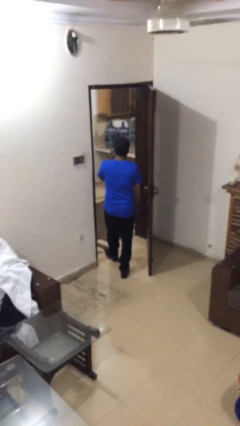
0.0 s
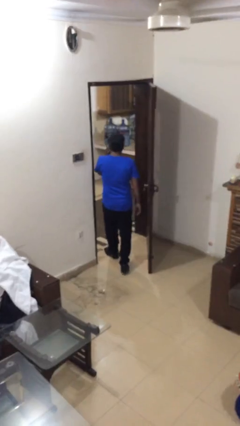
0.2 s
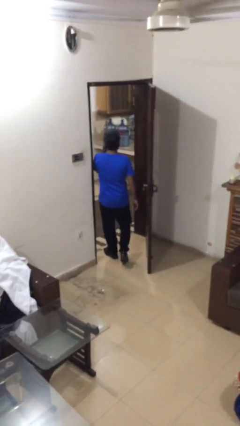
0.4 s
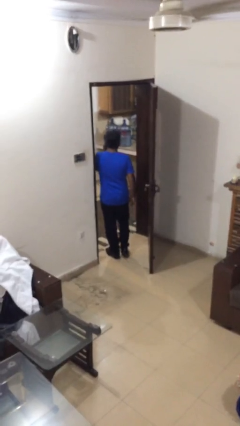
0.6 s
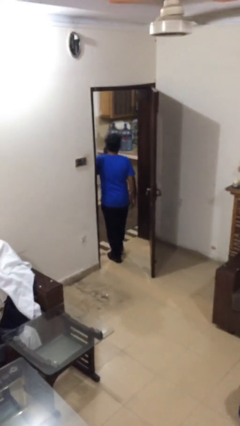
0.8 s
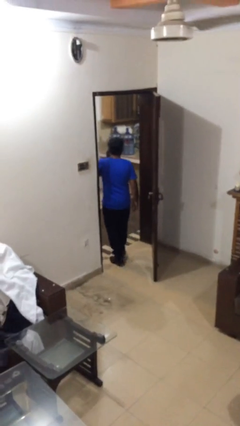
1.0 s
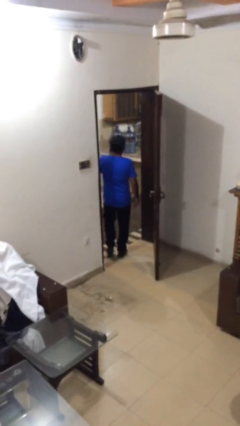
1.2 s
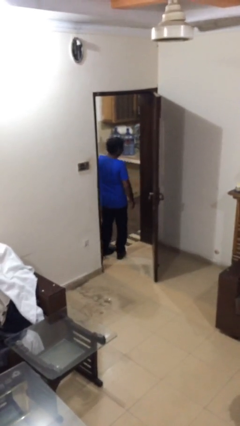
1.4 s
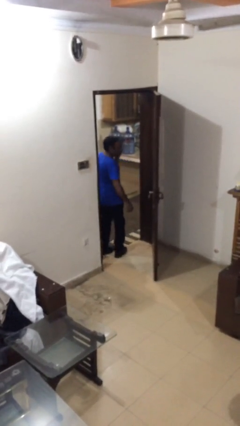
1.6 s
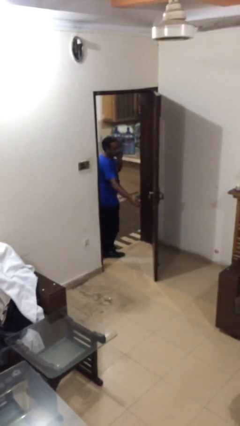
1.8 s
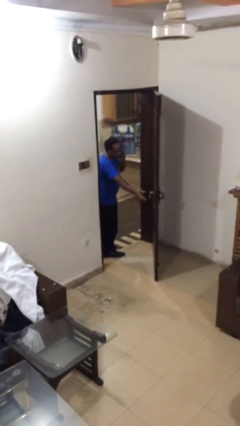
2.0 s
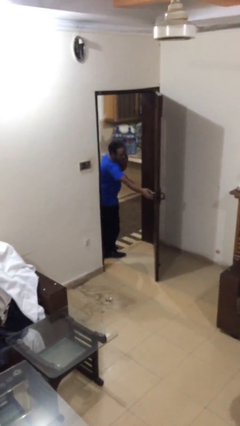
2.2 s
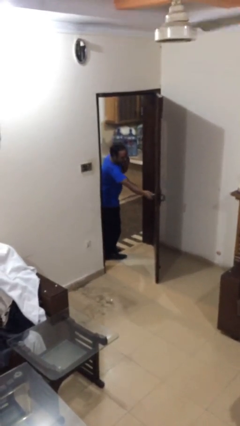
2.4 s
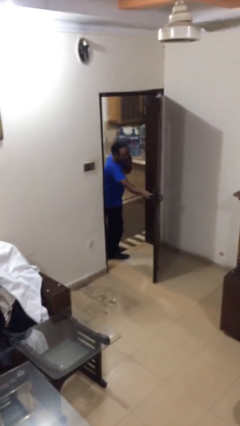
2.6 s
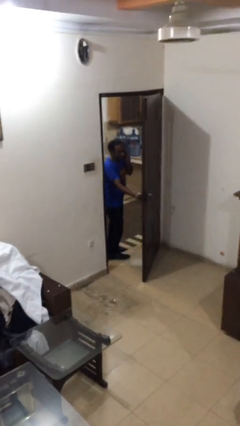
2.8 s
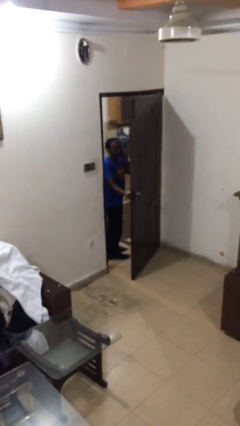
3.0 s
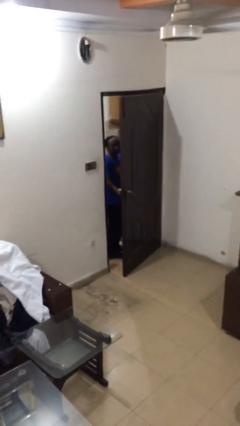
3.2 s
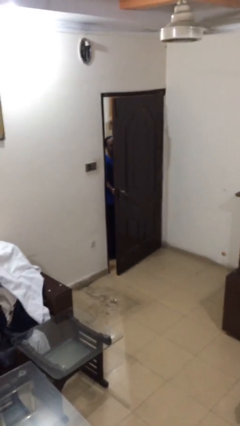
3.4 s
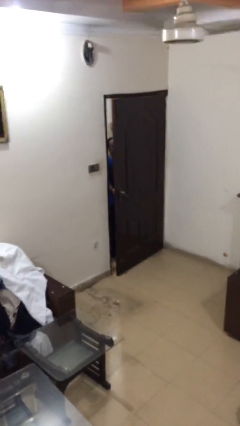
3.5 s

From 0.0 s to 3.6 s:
person closes facility door

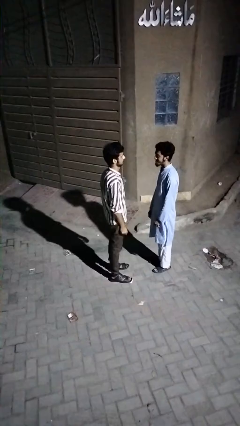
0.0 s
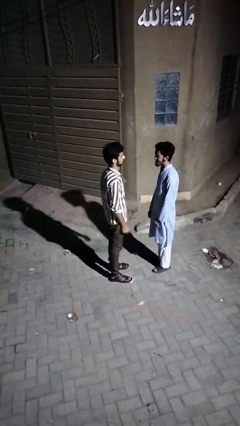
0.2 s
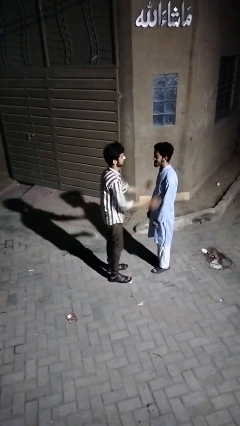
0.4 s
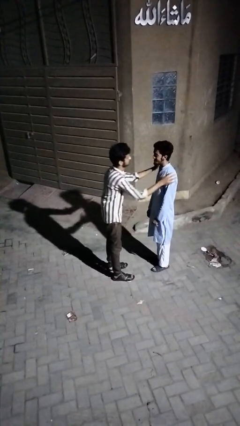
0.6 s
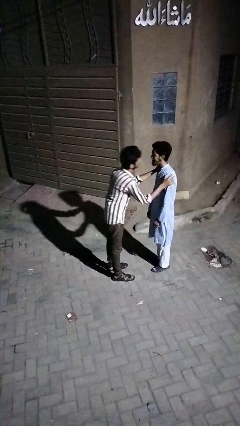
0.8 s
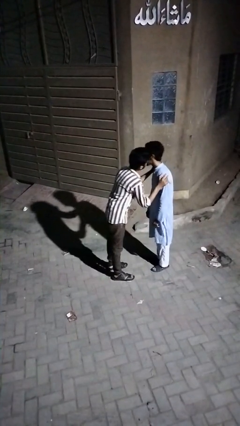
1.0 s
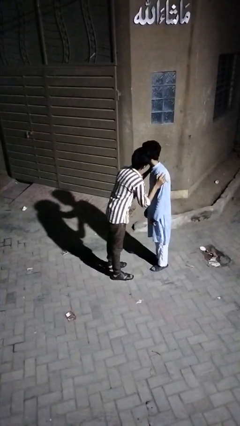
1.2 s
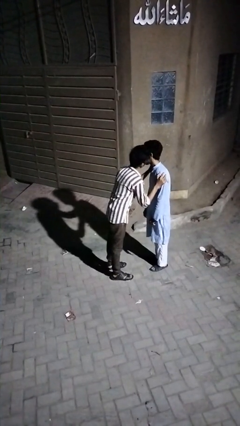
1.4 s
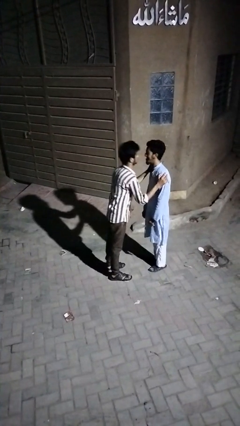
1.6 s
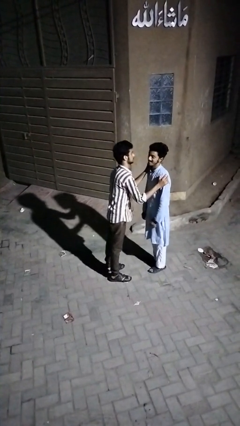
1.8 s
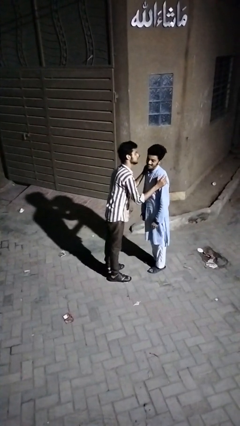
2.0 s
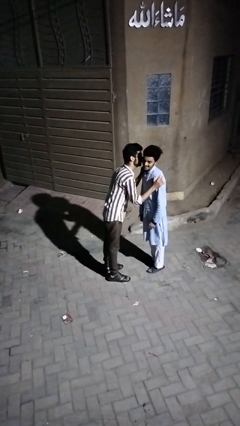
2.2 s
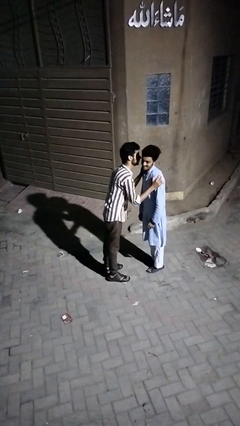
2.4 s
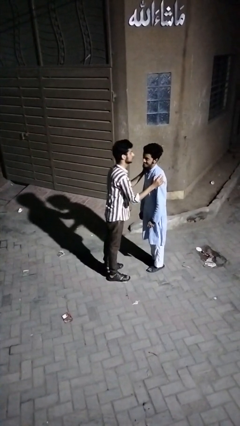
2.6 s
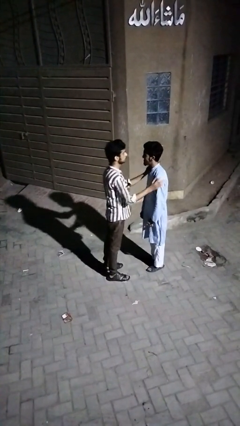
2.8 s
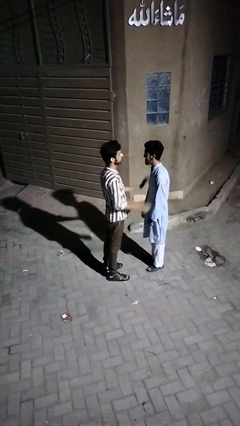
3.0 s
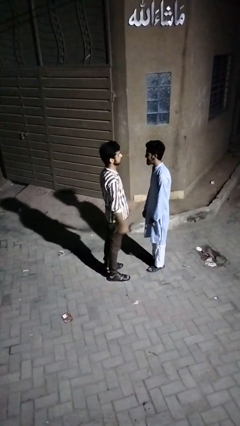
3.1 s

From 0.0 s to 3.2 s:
person kisses cheek of person

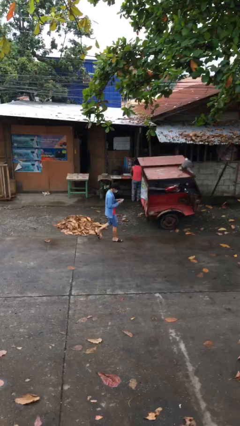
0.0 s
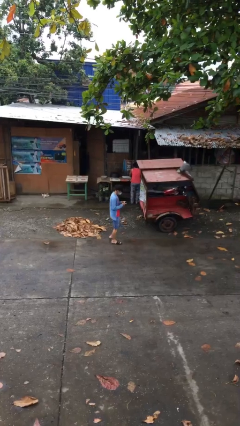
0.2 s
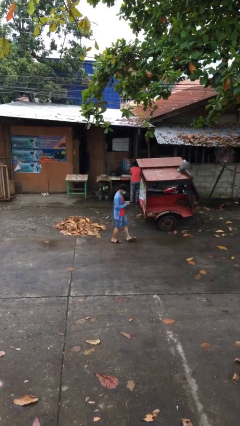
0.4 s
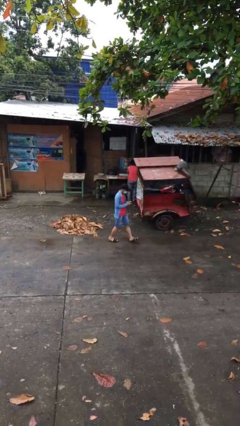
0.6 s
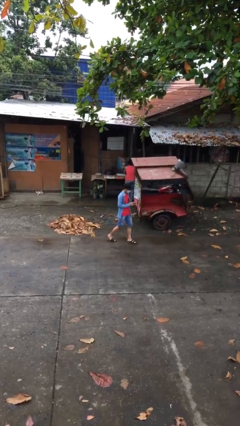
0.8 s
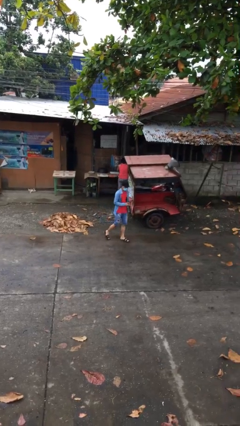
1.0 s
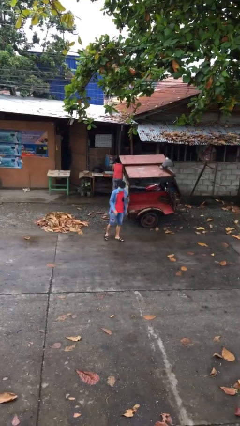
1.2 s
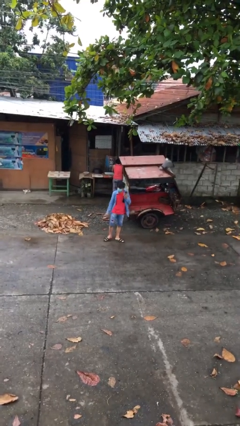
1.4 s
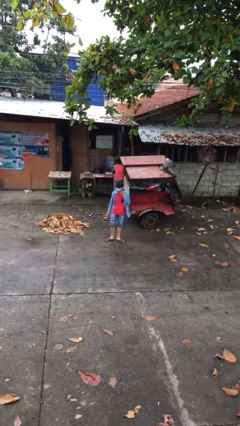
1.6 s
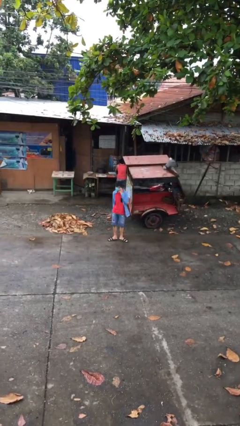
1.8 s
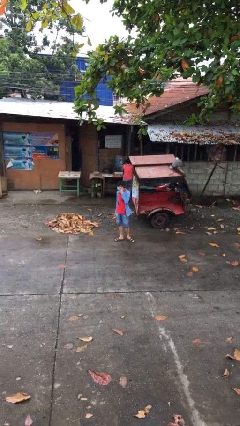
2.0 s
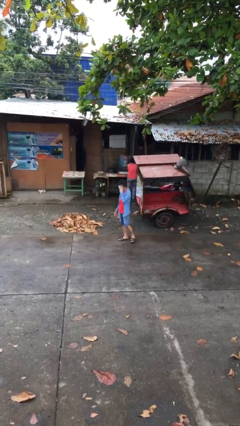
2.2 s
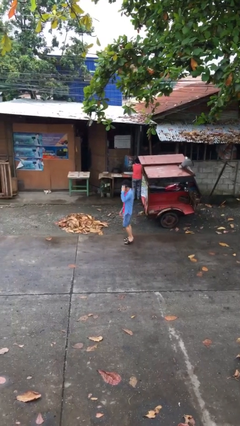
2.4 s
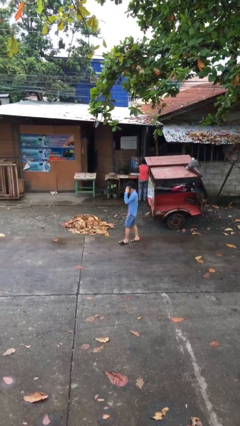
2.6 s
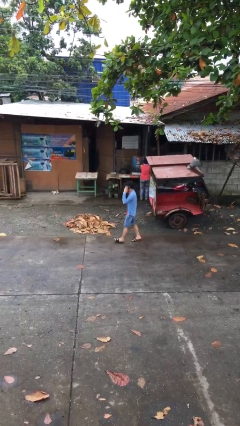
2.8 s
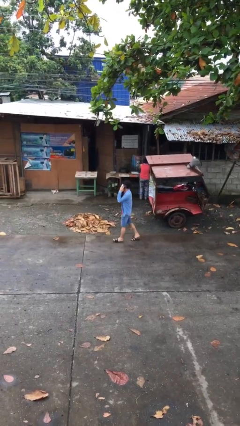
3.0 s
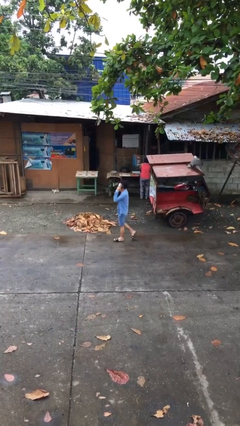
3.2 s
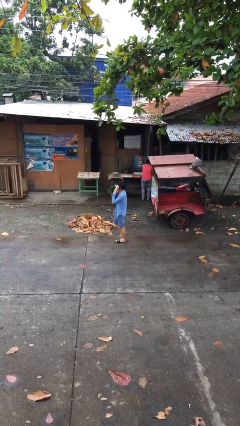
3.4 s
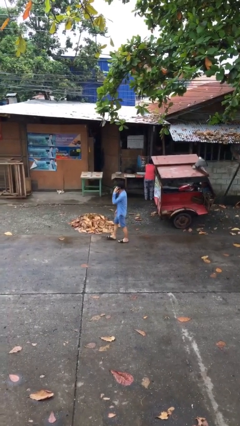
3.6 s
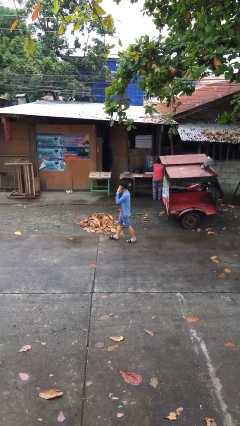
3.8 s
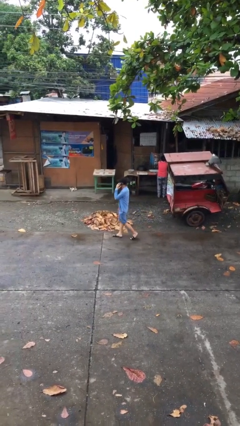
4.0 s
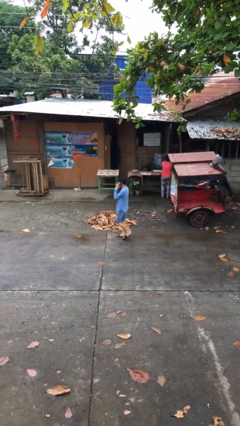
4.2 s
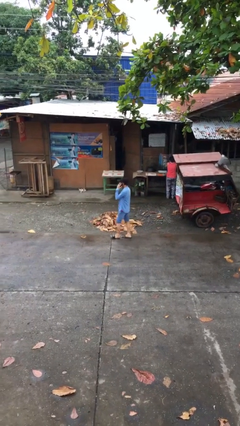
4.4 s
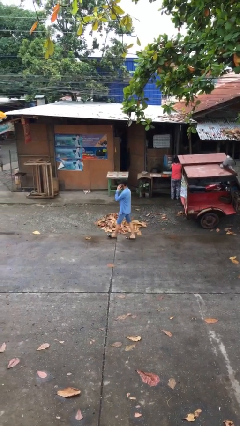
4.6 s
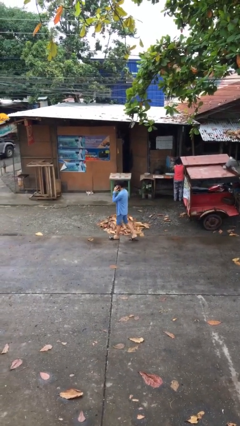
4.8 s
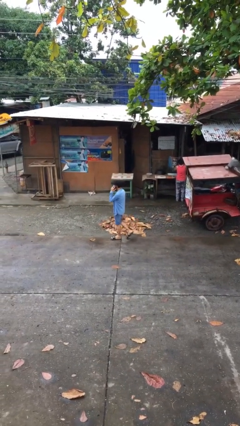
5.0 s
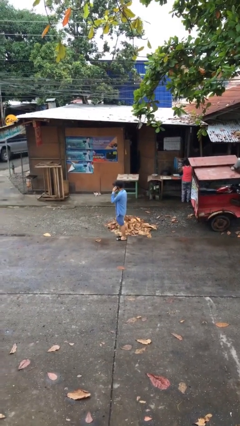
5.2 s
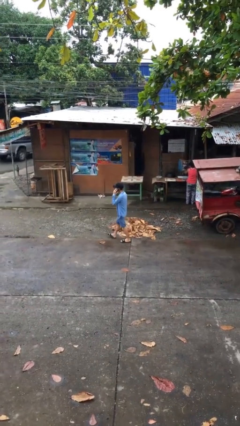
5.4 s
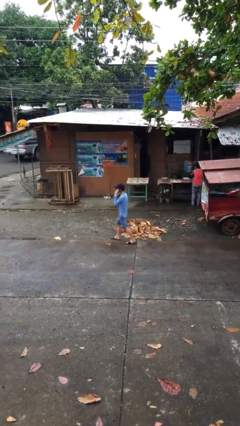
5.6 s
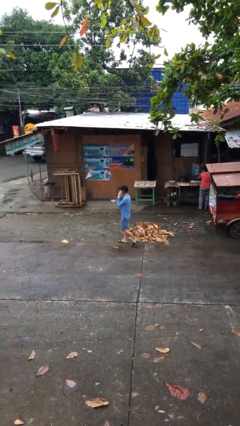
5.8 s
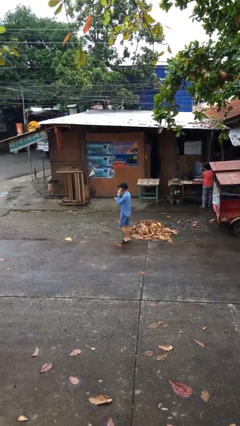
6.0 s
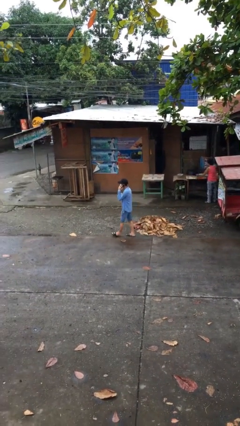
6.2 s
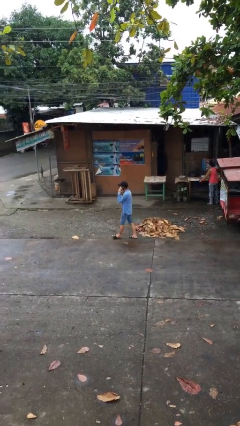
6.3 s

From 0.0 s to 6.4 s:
person talks on phone

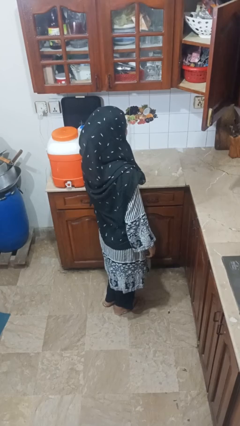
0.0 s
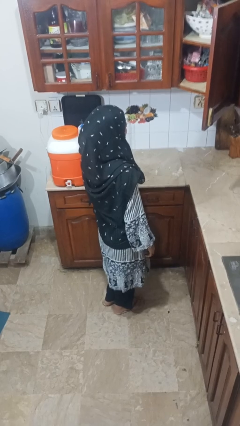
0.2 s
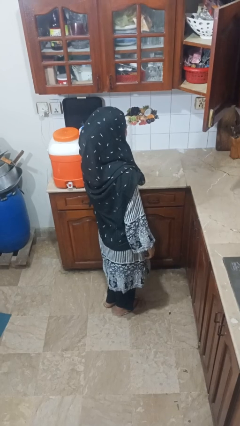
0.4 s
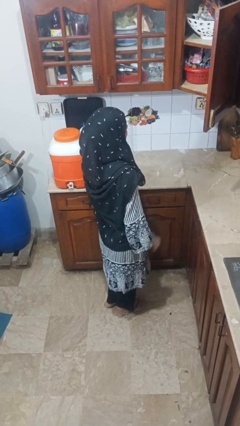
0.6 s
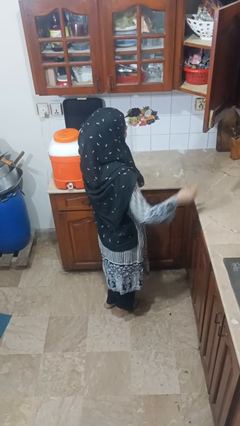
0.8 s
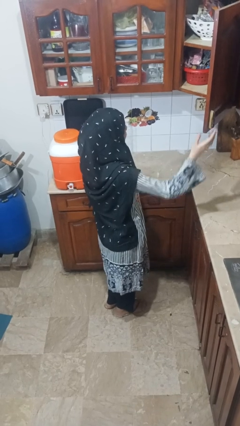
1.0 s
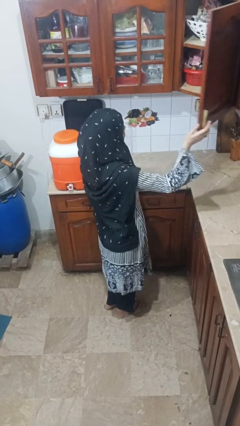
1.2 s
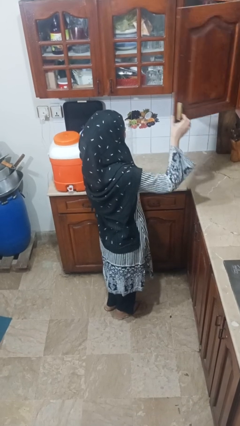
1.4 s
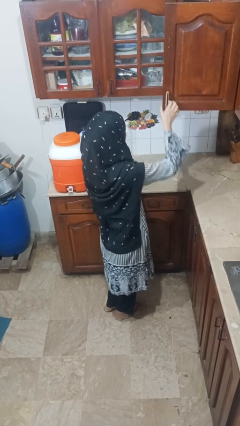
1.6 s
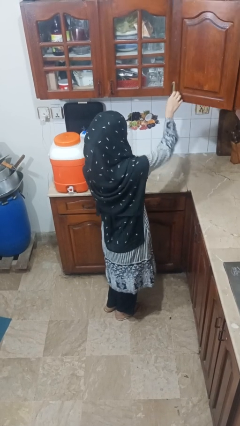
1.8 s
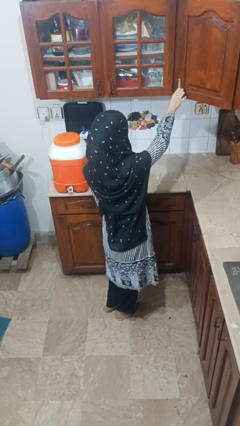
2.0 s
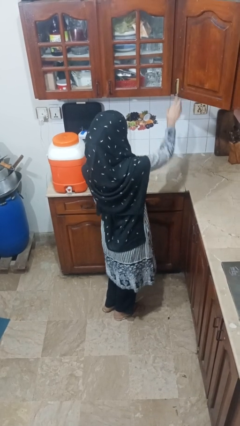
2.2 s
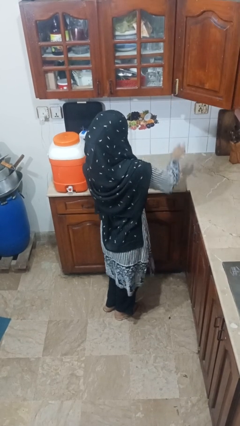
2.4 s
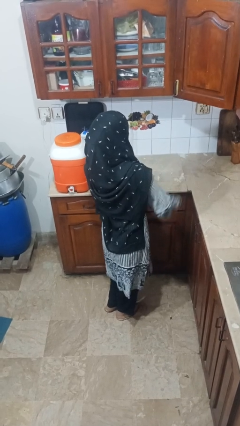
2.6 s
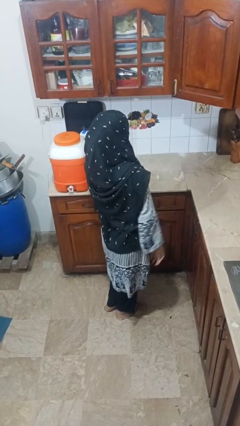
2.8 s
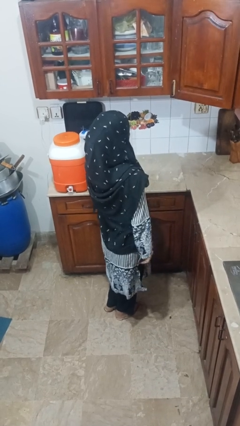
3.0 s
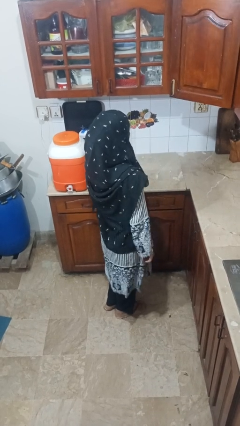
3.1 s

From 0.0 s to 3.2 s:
person closes cabinet

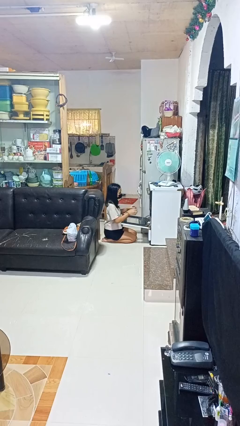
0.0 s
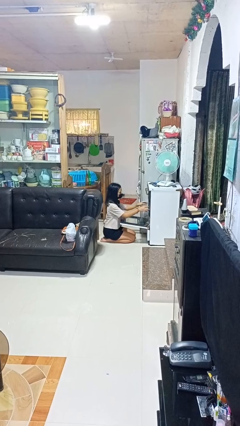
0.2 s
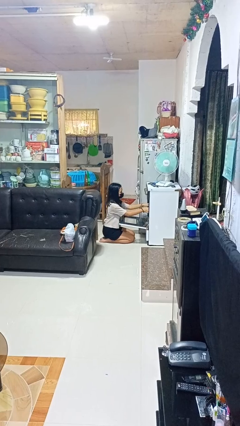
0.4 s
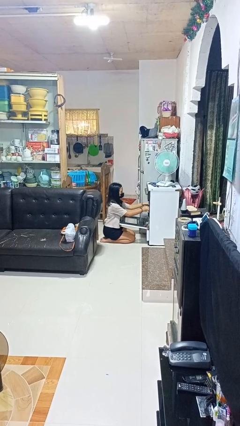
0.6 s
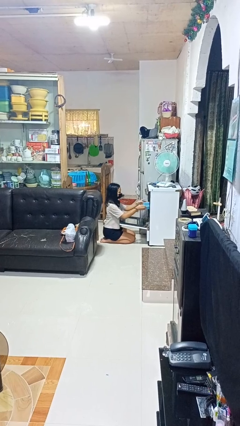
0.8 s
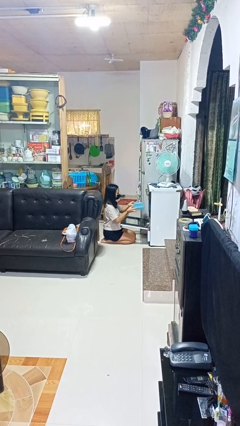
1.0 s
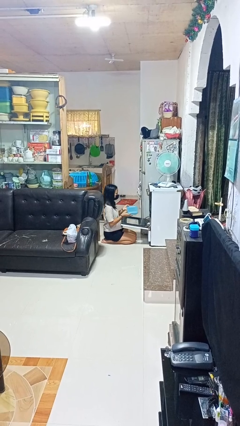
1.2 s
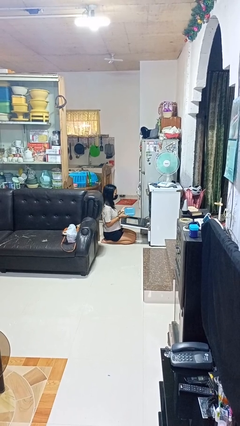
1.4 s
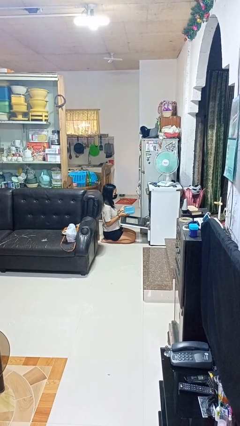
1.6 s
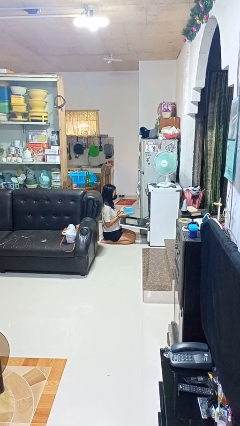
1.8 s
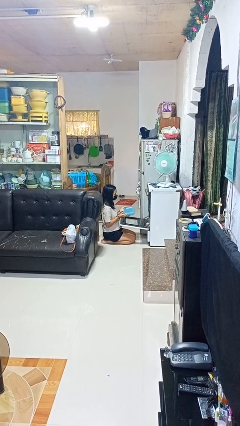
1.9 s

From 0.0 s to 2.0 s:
person takes object from oven
